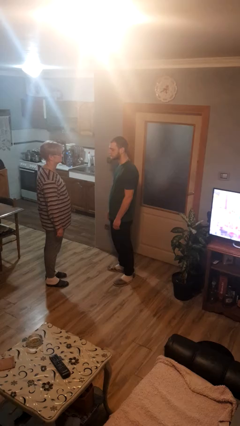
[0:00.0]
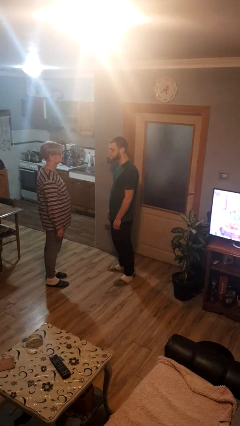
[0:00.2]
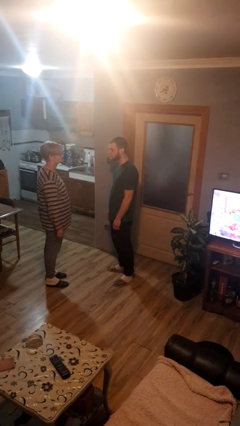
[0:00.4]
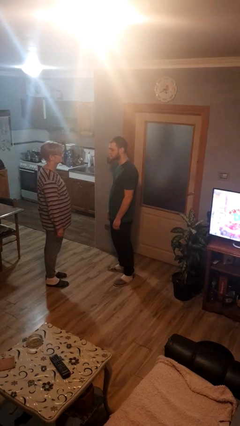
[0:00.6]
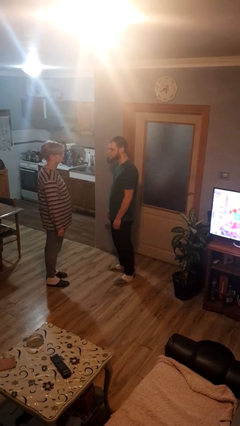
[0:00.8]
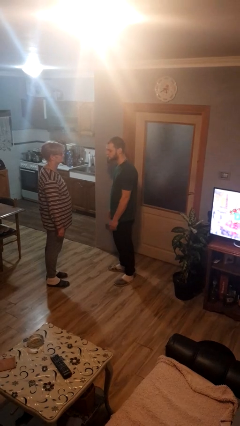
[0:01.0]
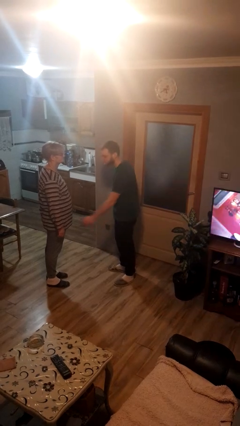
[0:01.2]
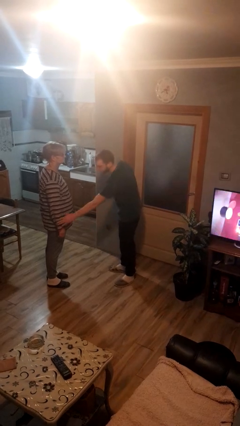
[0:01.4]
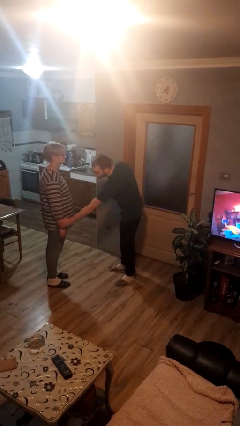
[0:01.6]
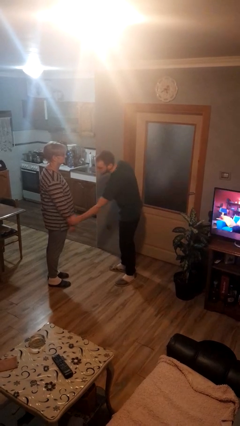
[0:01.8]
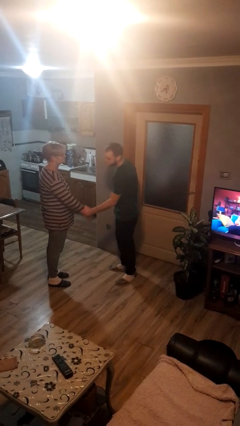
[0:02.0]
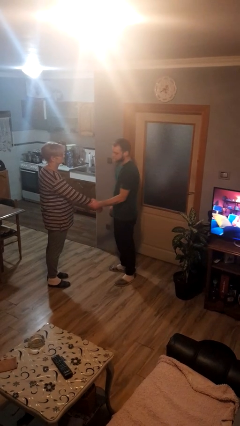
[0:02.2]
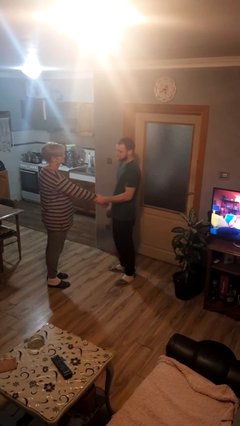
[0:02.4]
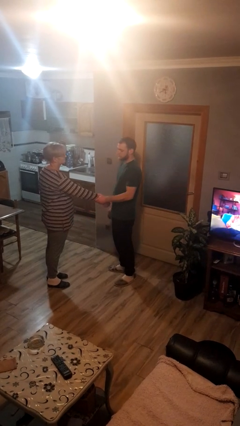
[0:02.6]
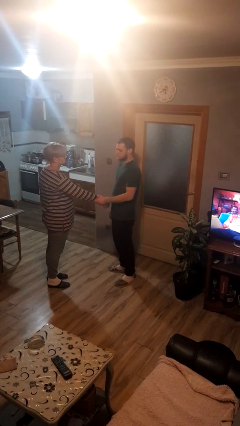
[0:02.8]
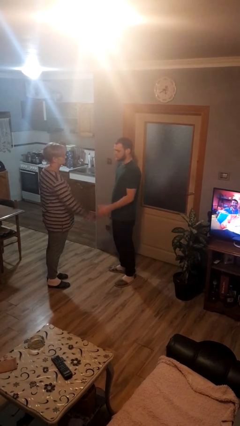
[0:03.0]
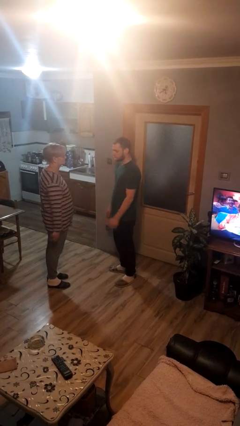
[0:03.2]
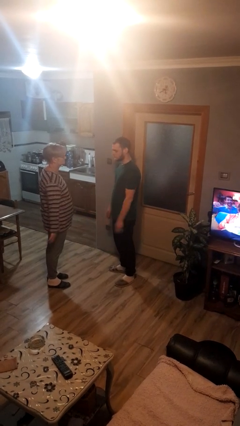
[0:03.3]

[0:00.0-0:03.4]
person grabs person by forearm

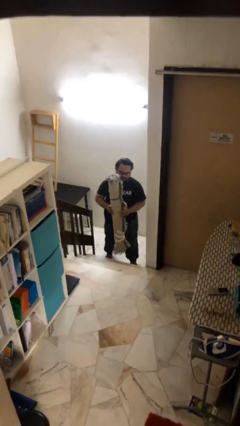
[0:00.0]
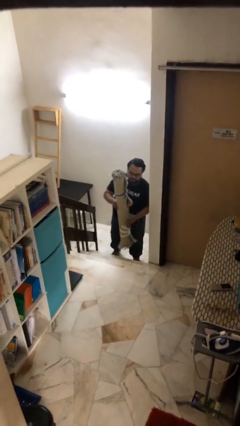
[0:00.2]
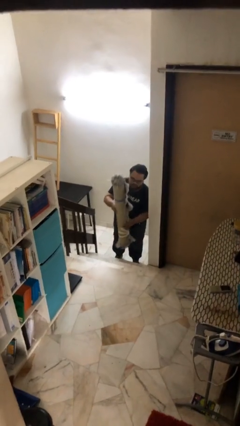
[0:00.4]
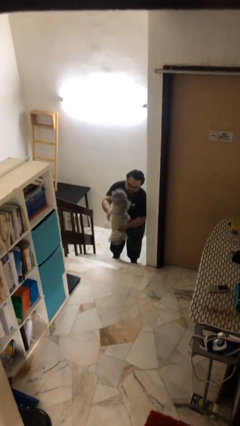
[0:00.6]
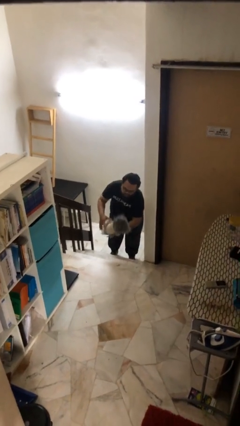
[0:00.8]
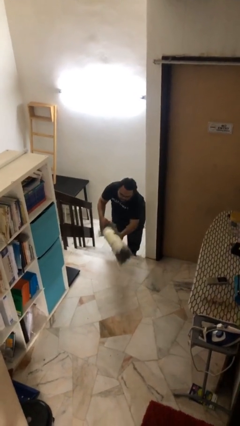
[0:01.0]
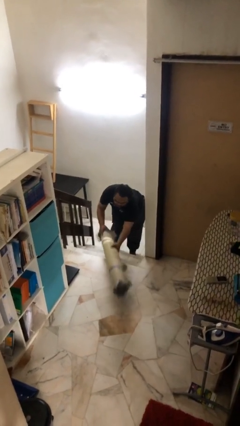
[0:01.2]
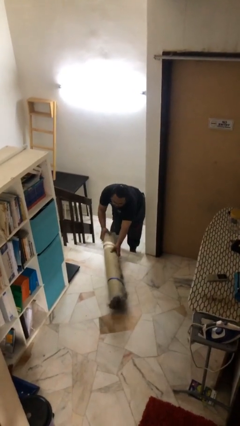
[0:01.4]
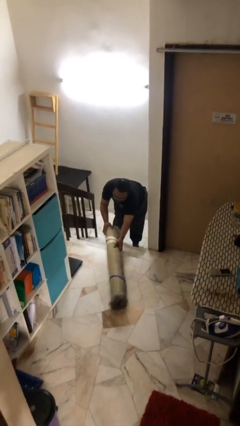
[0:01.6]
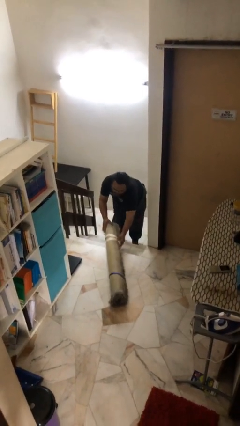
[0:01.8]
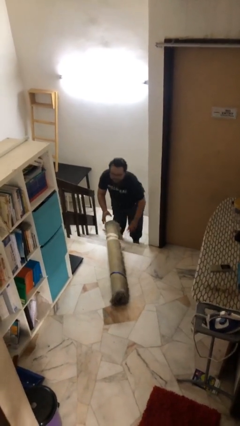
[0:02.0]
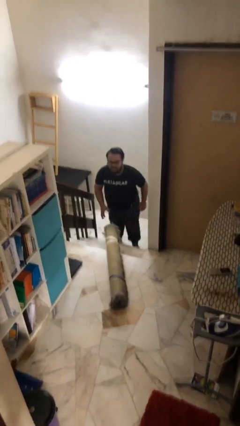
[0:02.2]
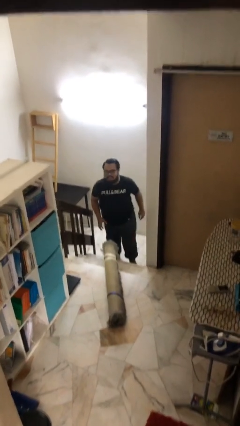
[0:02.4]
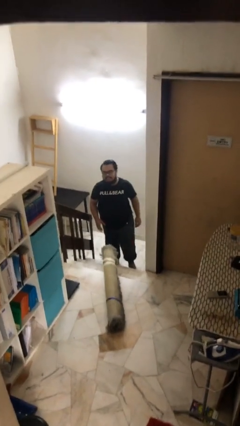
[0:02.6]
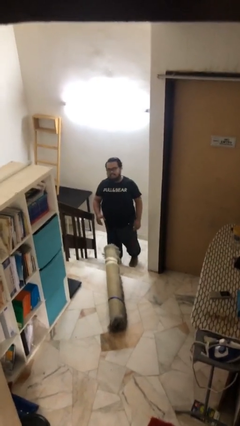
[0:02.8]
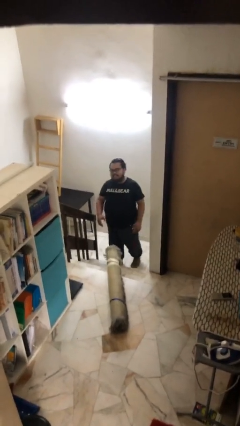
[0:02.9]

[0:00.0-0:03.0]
person puts down object on floor

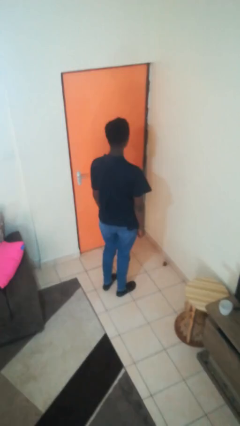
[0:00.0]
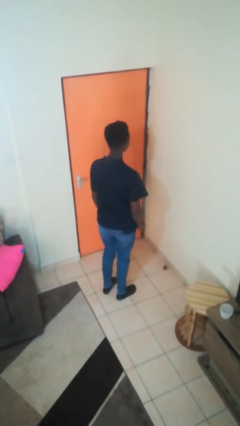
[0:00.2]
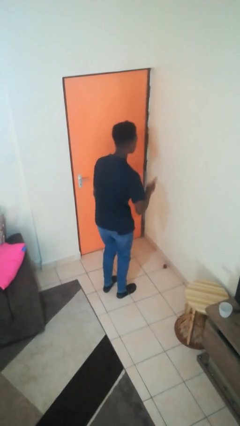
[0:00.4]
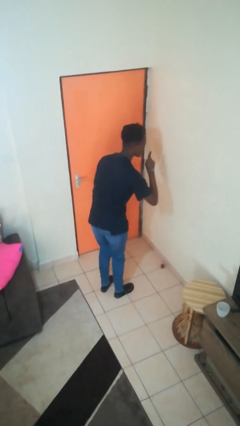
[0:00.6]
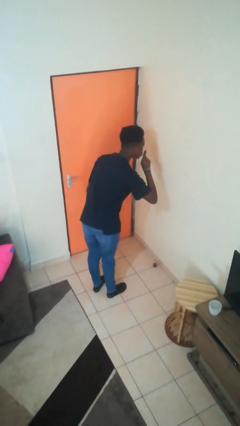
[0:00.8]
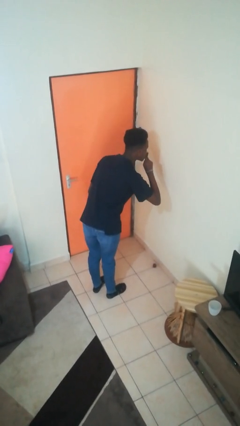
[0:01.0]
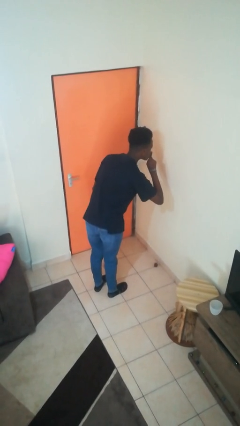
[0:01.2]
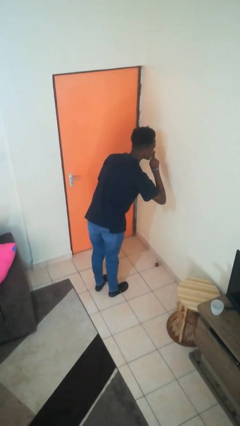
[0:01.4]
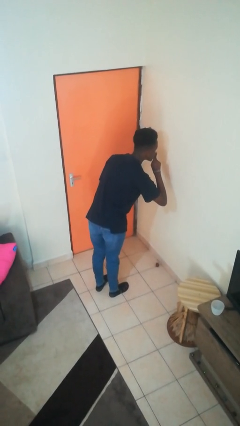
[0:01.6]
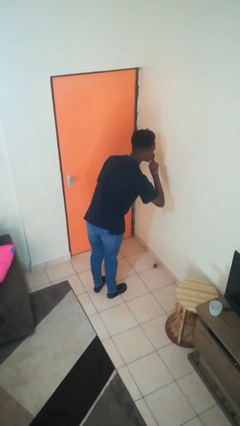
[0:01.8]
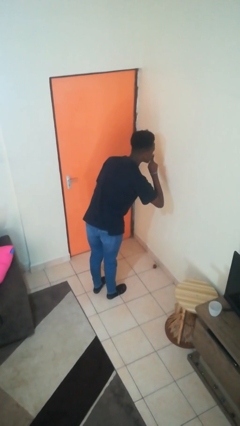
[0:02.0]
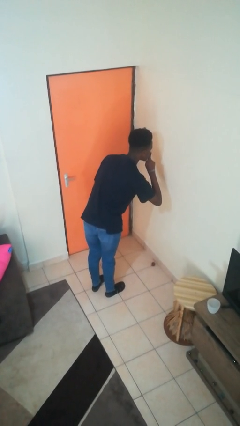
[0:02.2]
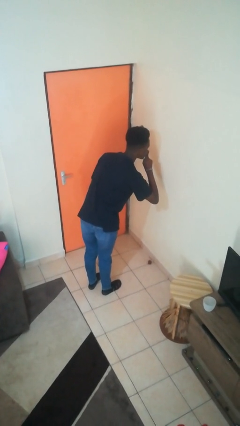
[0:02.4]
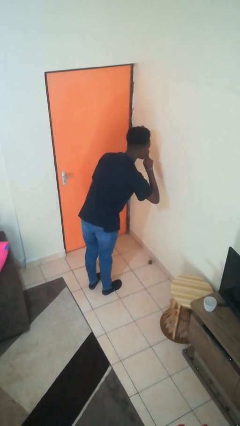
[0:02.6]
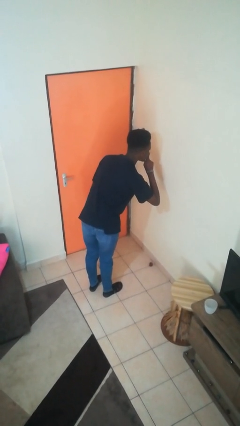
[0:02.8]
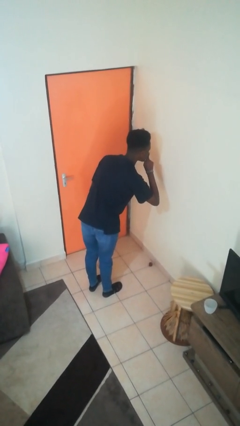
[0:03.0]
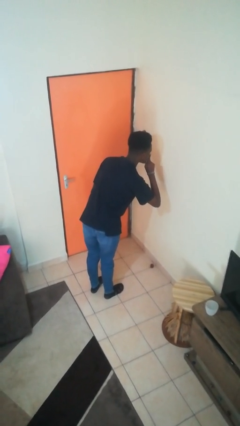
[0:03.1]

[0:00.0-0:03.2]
person gestures be quiet

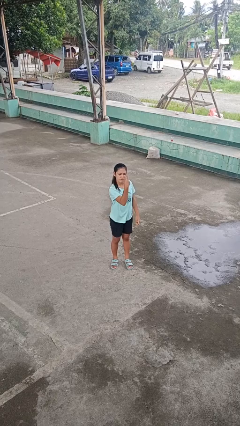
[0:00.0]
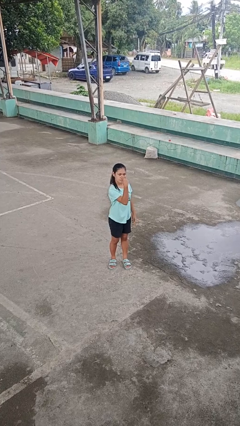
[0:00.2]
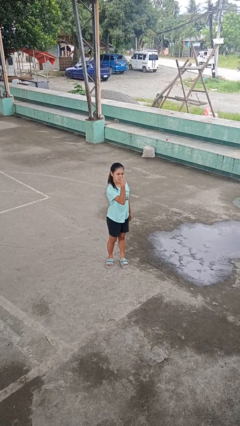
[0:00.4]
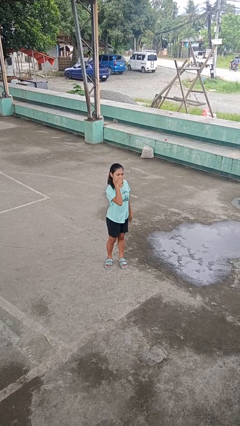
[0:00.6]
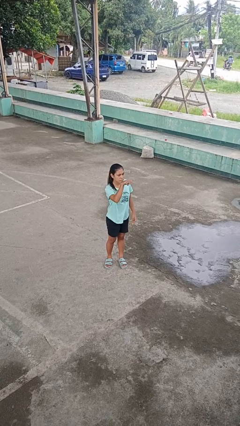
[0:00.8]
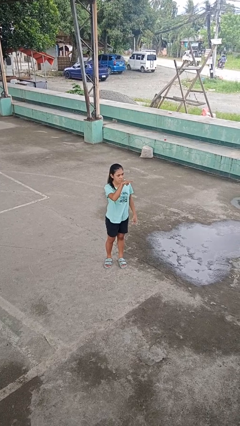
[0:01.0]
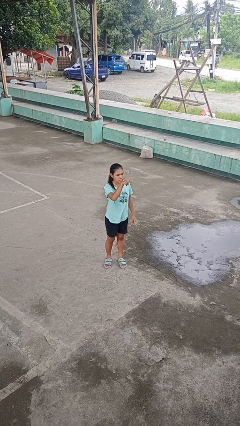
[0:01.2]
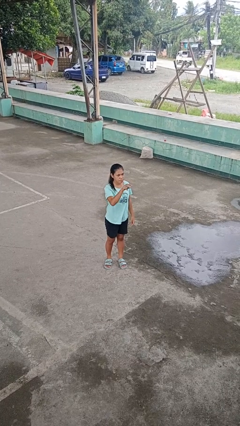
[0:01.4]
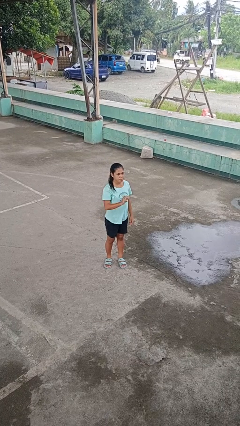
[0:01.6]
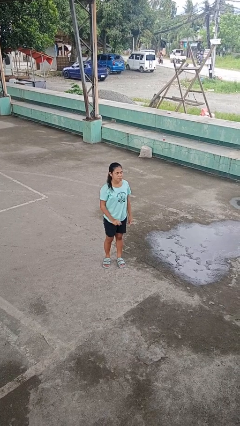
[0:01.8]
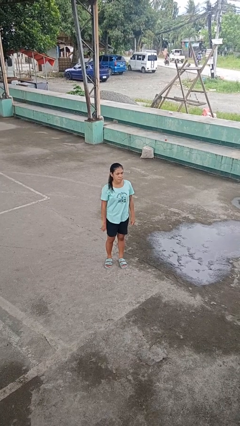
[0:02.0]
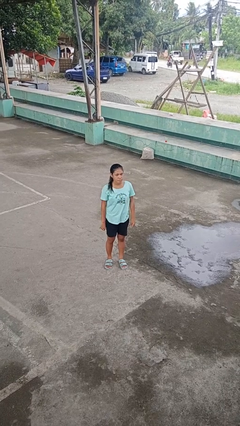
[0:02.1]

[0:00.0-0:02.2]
person gestures watch closely

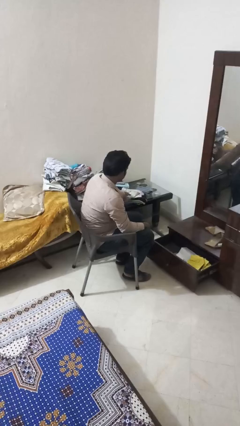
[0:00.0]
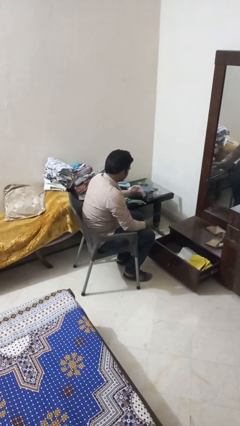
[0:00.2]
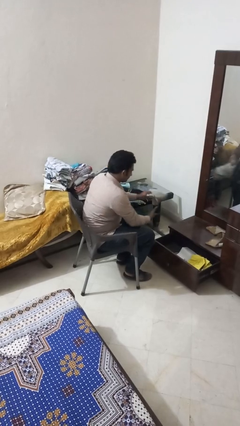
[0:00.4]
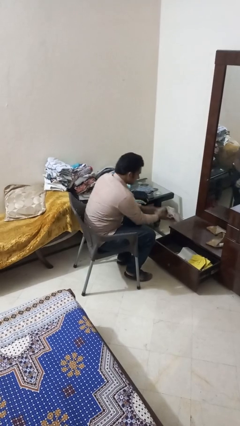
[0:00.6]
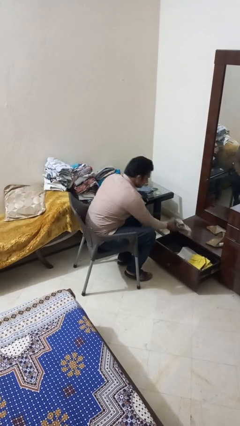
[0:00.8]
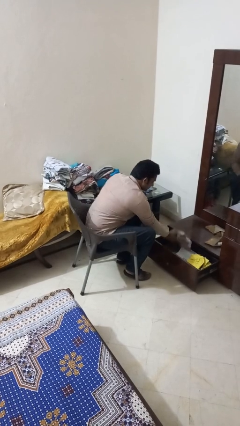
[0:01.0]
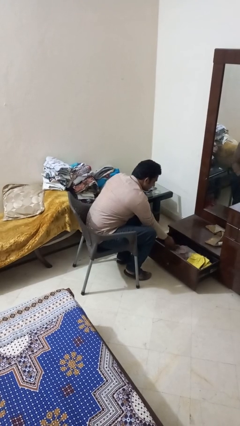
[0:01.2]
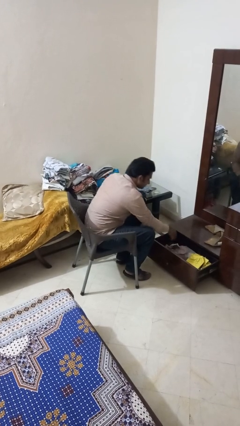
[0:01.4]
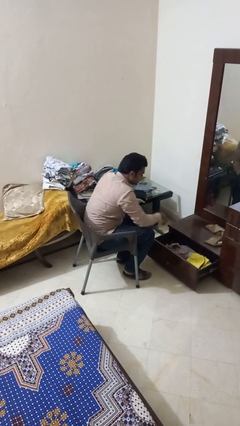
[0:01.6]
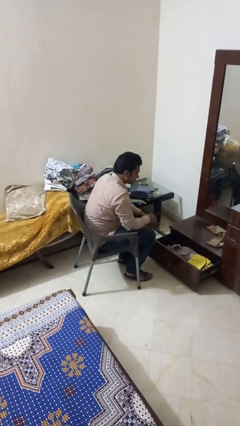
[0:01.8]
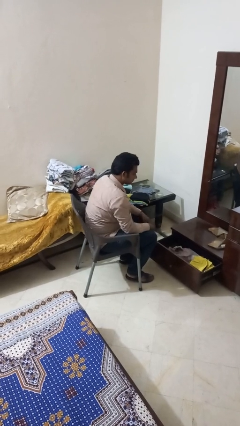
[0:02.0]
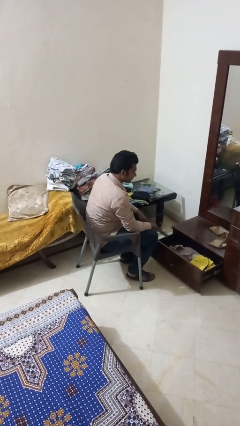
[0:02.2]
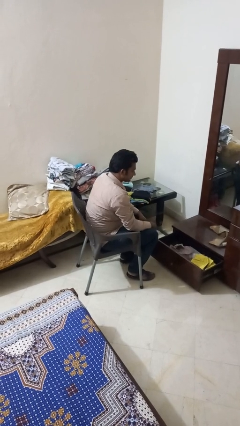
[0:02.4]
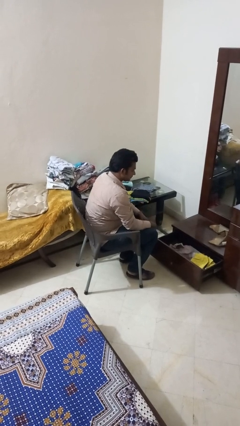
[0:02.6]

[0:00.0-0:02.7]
person puts clothes into dresser

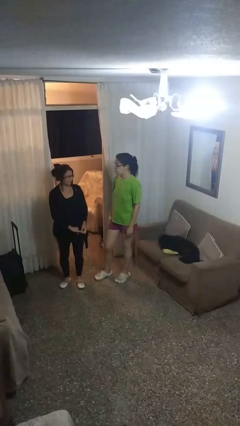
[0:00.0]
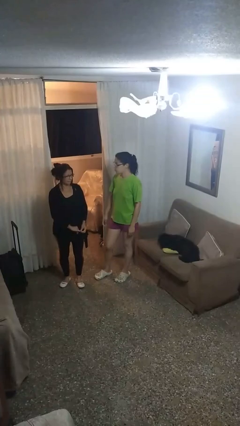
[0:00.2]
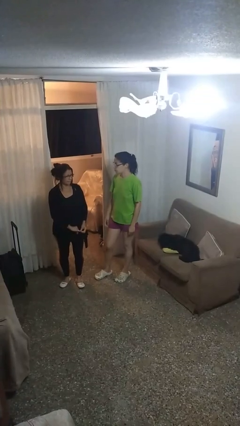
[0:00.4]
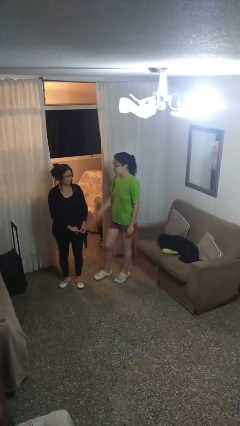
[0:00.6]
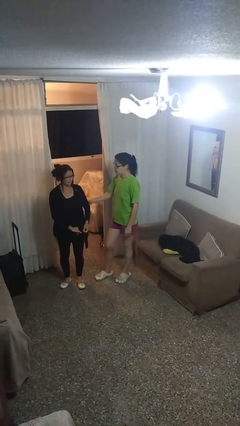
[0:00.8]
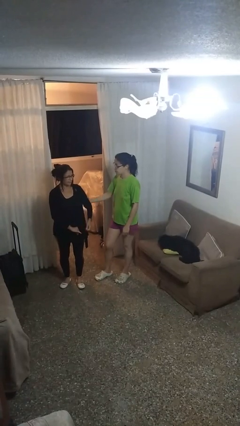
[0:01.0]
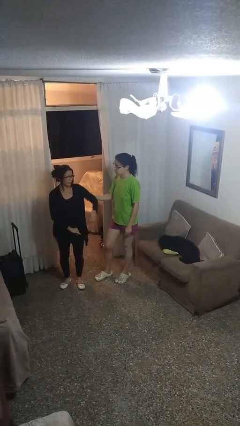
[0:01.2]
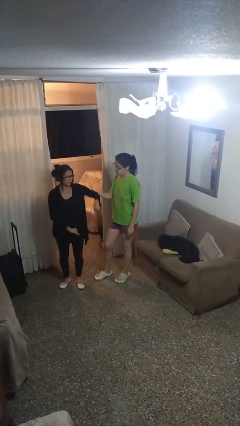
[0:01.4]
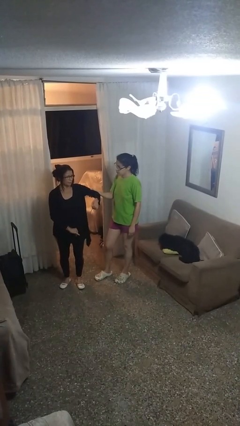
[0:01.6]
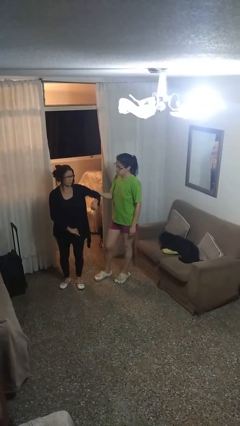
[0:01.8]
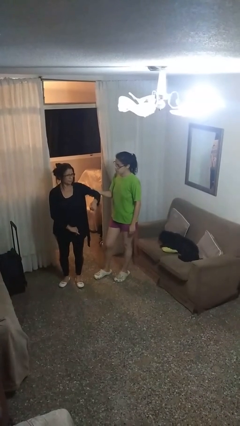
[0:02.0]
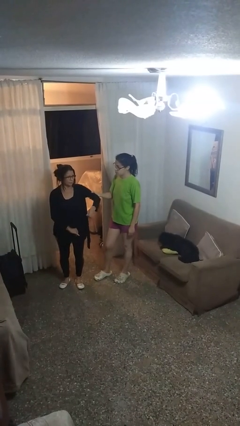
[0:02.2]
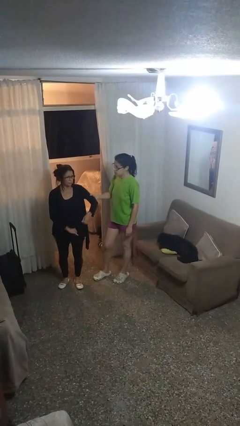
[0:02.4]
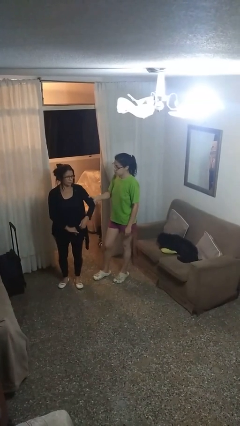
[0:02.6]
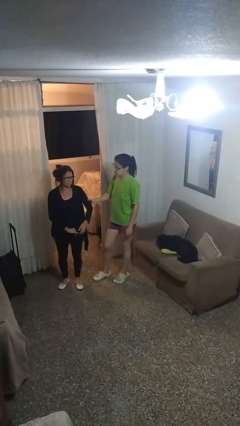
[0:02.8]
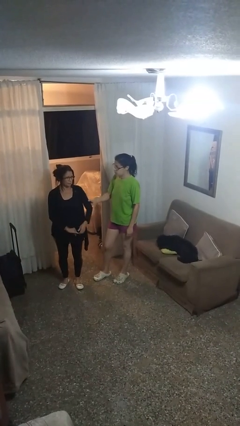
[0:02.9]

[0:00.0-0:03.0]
person grabs person by bicep
